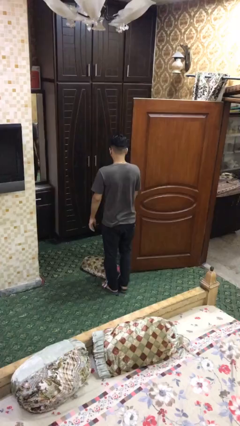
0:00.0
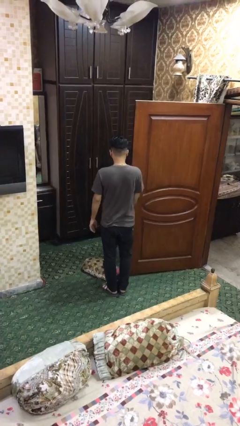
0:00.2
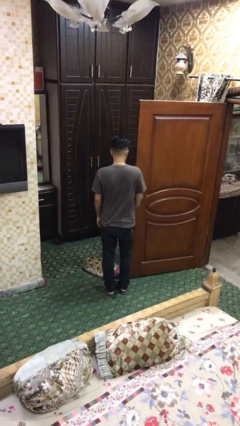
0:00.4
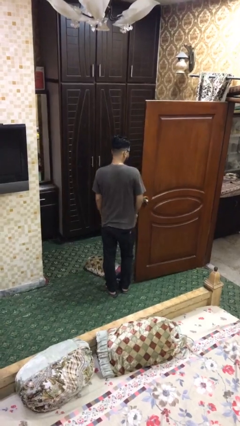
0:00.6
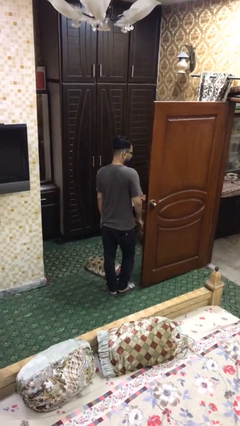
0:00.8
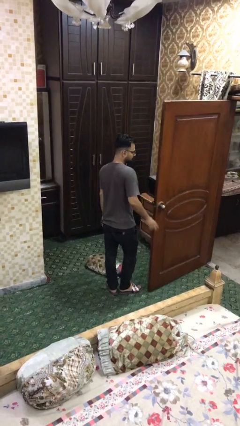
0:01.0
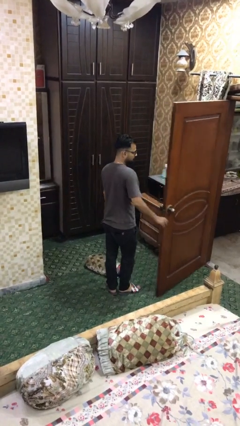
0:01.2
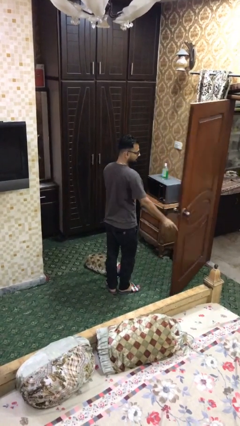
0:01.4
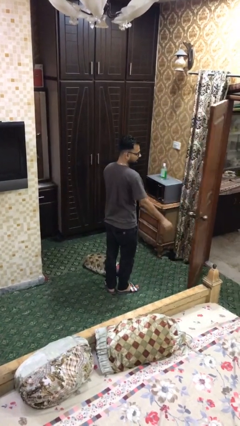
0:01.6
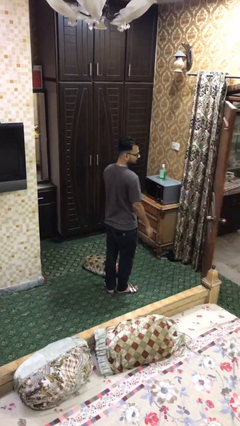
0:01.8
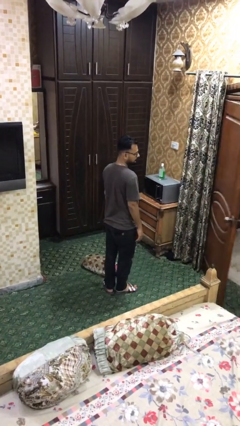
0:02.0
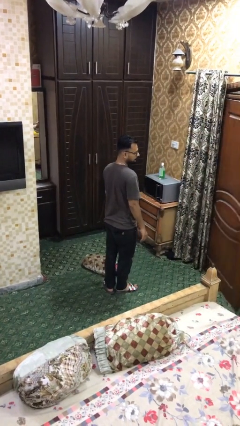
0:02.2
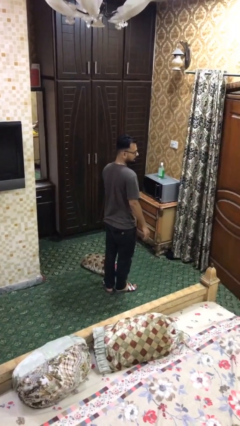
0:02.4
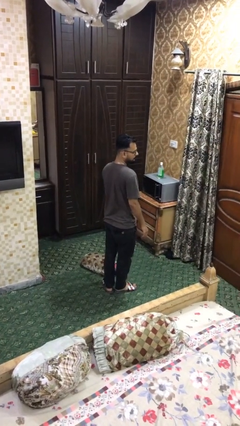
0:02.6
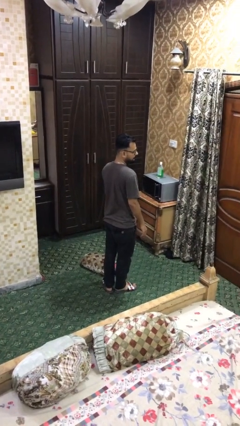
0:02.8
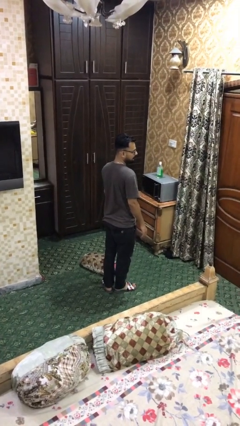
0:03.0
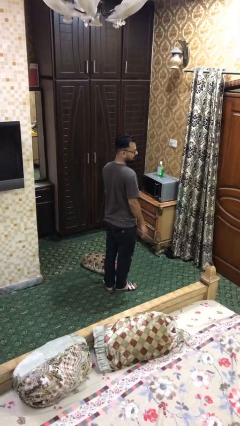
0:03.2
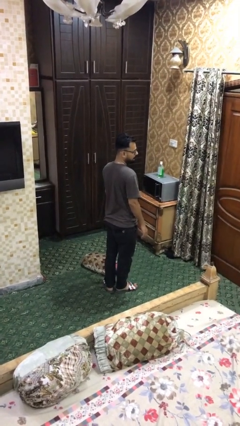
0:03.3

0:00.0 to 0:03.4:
person closes facility door

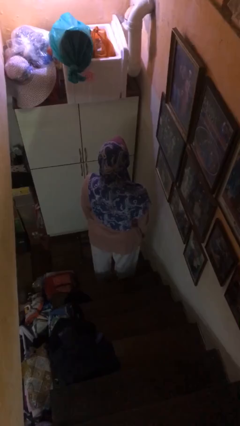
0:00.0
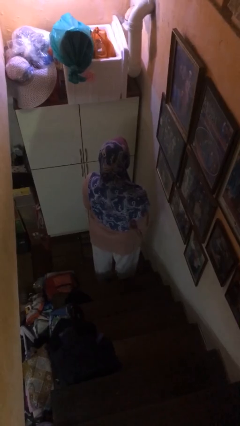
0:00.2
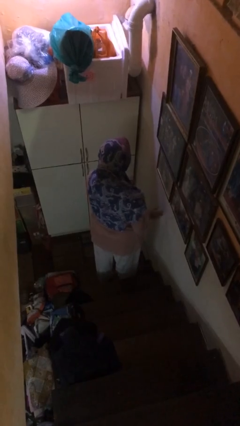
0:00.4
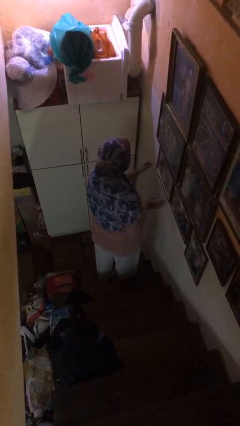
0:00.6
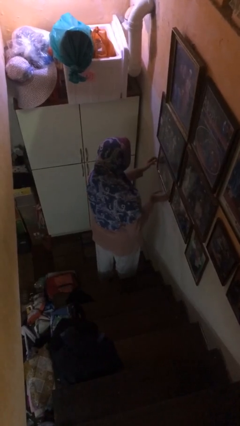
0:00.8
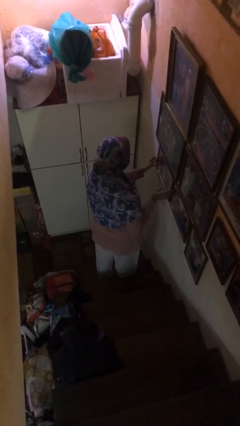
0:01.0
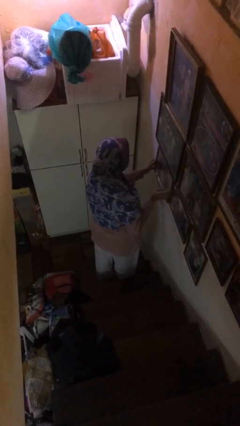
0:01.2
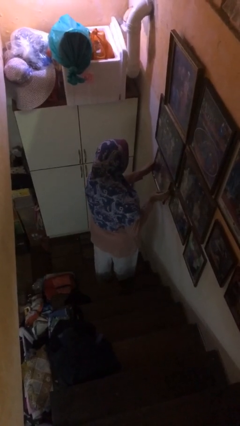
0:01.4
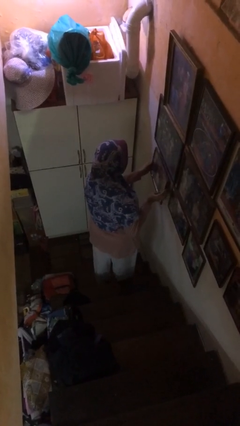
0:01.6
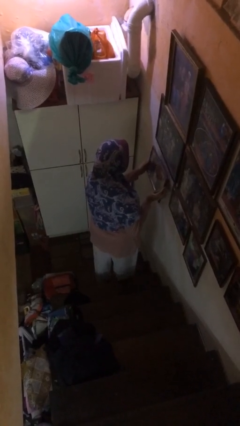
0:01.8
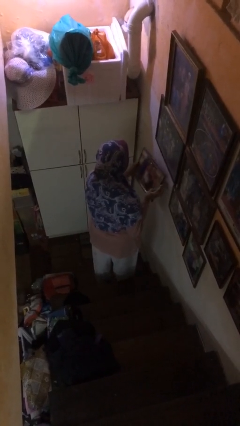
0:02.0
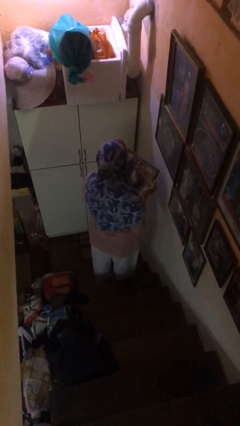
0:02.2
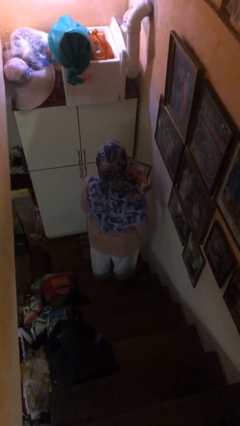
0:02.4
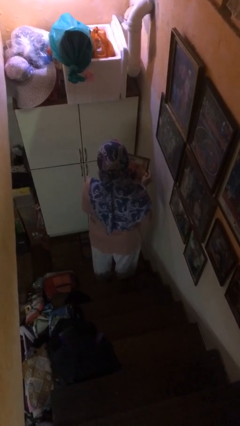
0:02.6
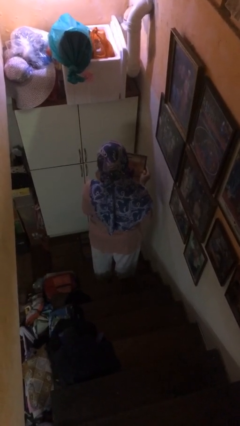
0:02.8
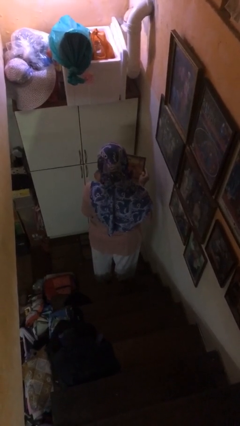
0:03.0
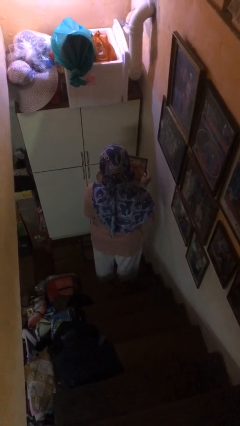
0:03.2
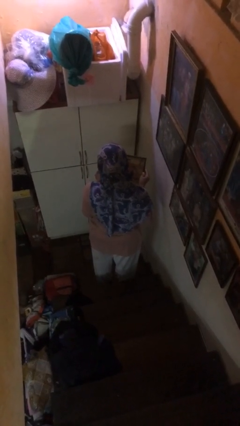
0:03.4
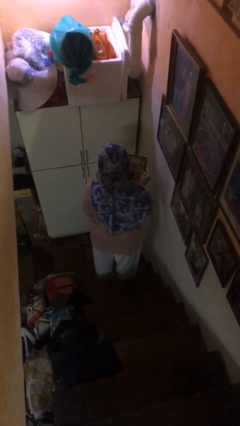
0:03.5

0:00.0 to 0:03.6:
person puts up picture frame

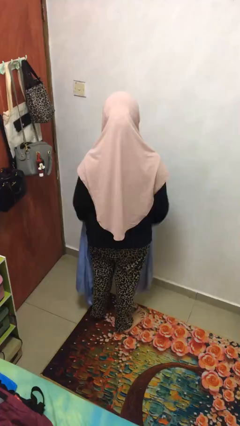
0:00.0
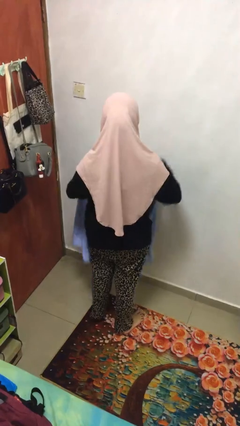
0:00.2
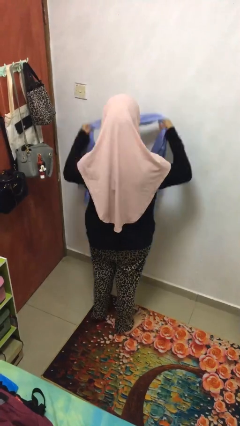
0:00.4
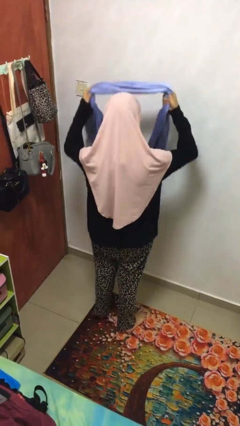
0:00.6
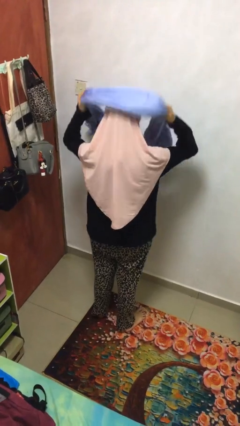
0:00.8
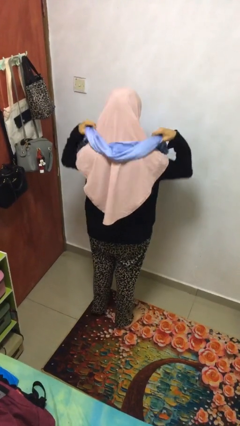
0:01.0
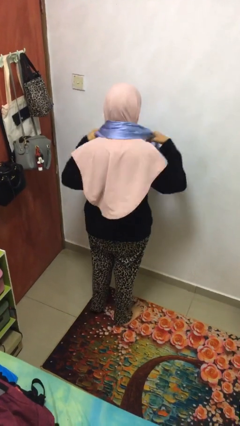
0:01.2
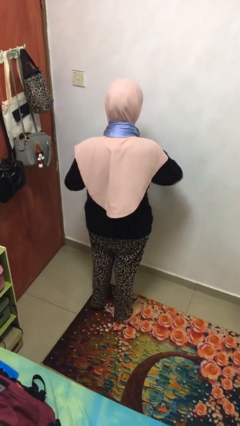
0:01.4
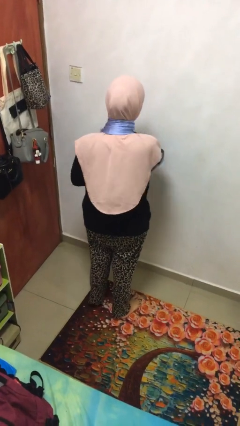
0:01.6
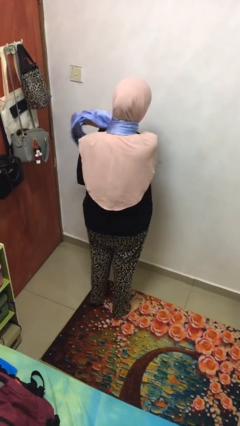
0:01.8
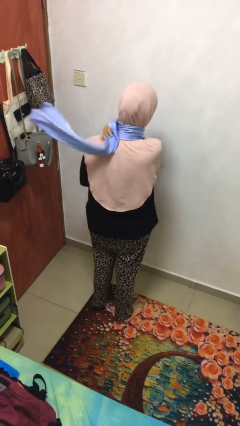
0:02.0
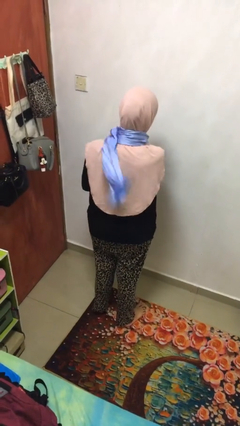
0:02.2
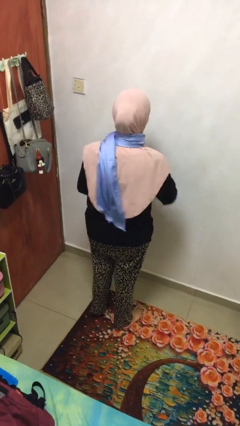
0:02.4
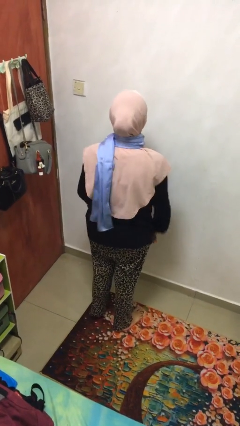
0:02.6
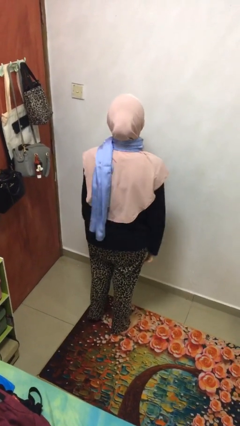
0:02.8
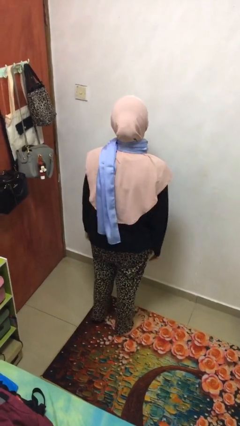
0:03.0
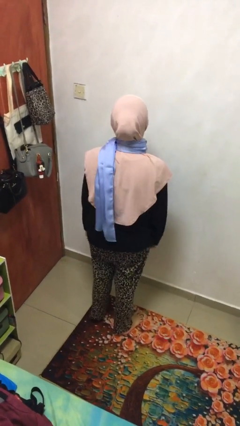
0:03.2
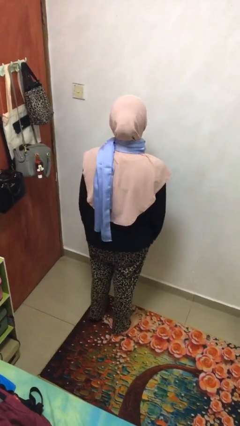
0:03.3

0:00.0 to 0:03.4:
person puts on scarf

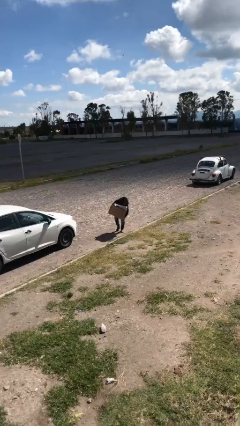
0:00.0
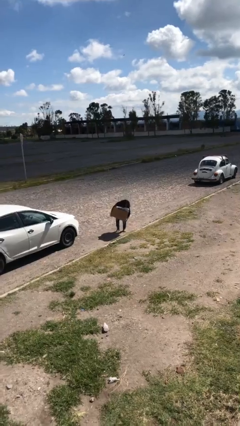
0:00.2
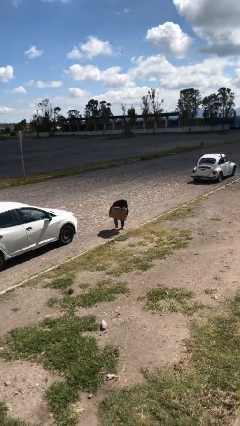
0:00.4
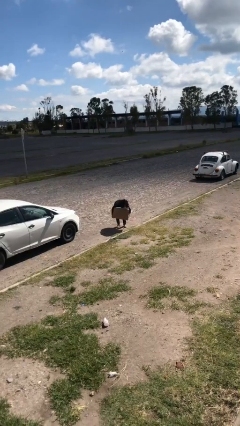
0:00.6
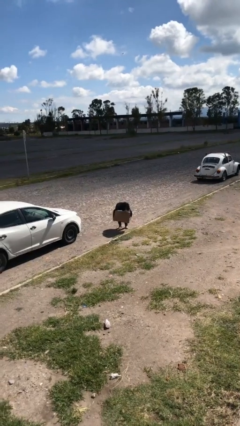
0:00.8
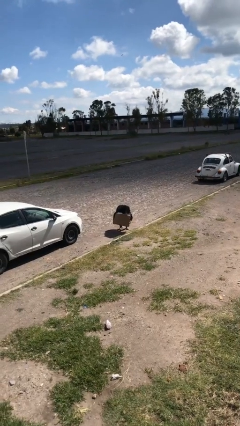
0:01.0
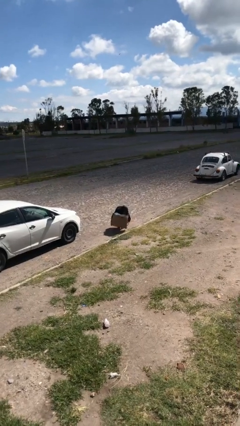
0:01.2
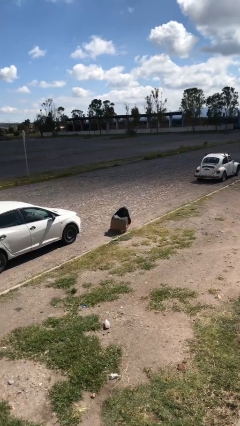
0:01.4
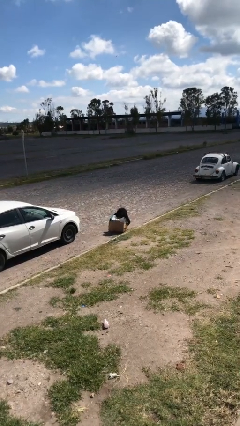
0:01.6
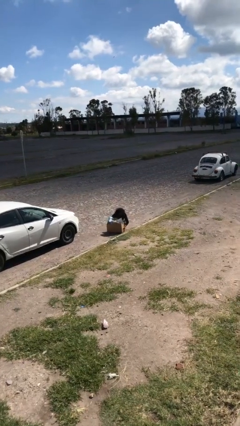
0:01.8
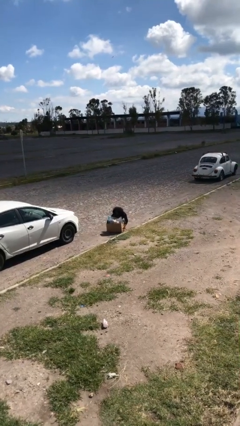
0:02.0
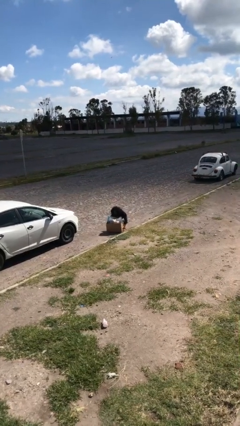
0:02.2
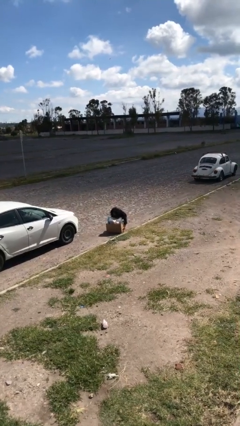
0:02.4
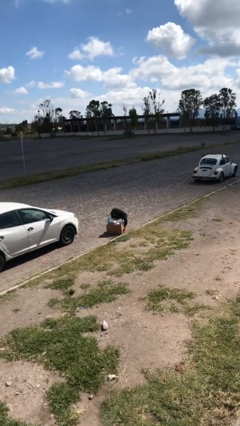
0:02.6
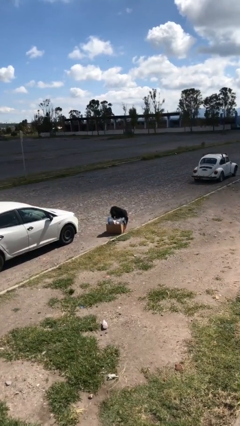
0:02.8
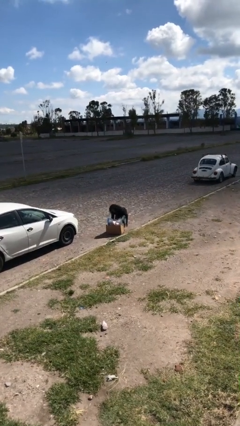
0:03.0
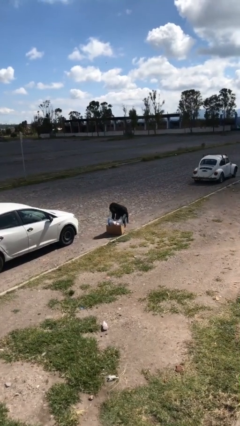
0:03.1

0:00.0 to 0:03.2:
person puts down object on floor

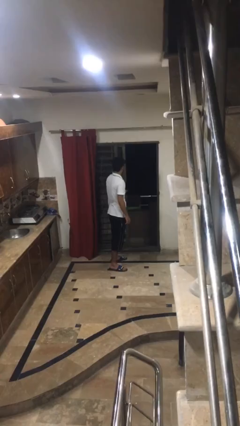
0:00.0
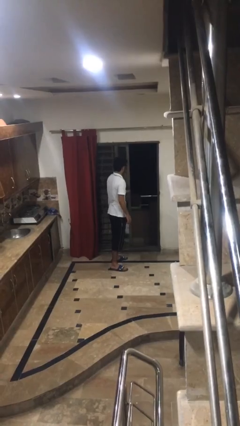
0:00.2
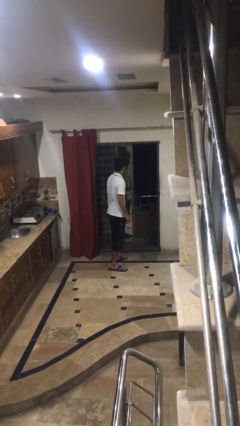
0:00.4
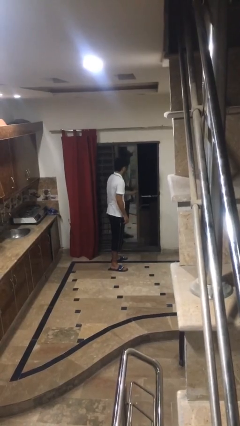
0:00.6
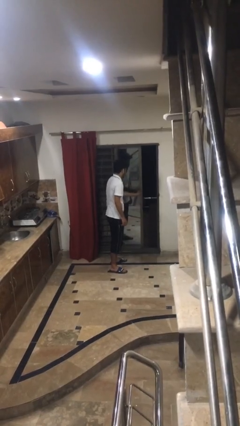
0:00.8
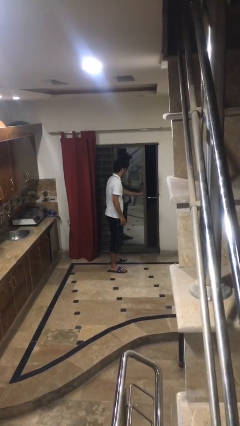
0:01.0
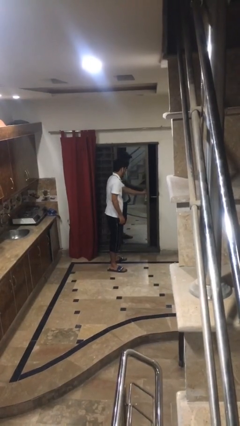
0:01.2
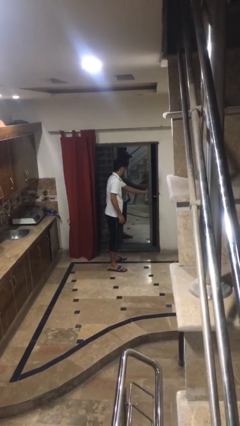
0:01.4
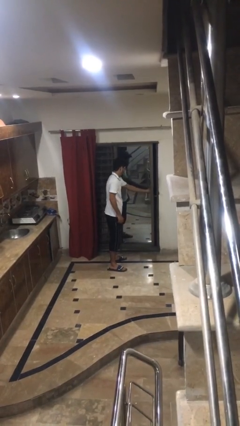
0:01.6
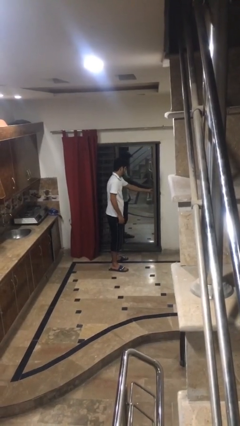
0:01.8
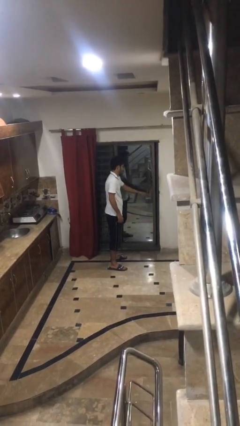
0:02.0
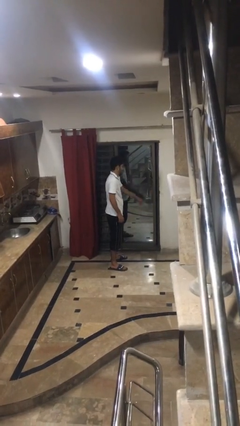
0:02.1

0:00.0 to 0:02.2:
person closes sliding door

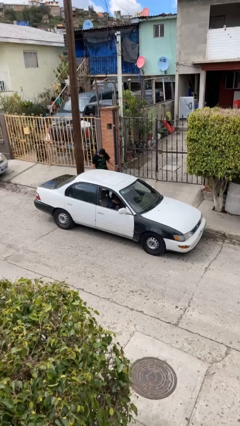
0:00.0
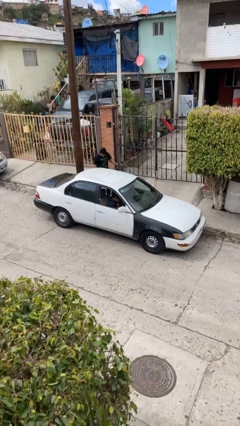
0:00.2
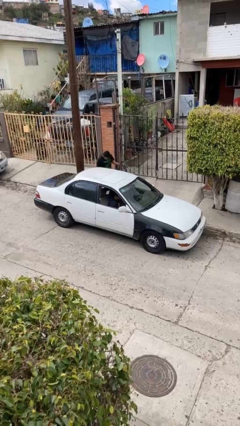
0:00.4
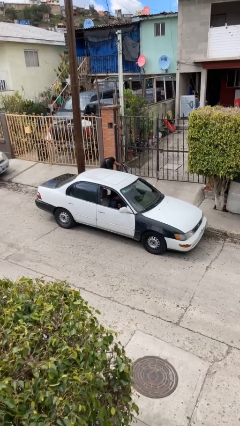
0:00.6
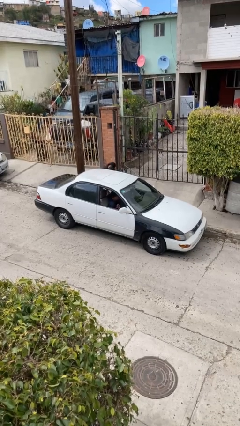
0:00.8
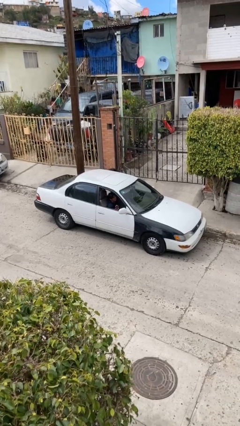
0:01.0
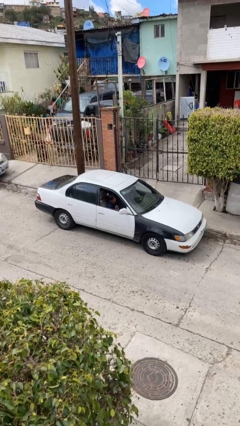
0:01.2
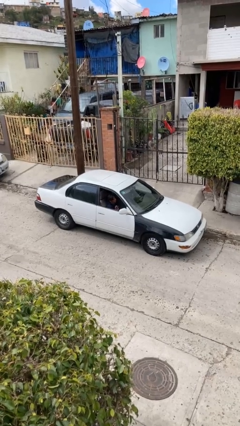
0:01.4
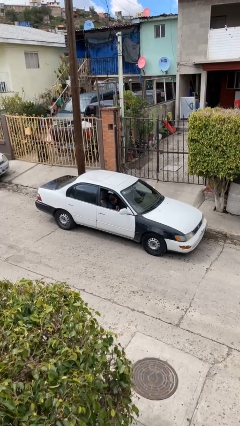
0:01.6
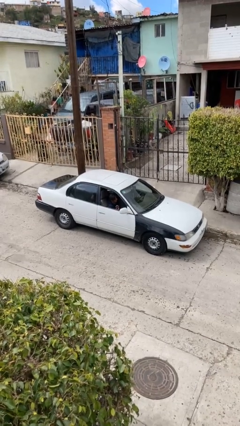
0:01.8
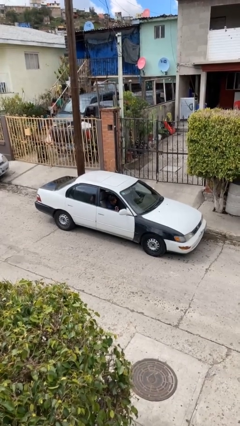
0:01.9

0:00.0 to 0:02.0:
car picks up person
